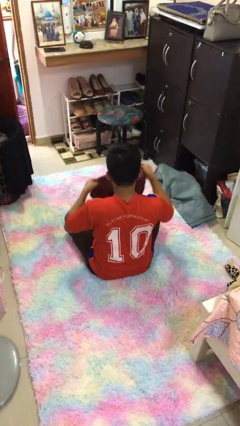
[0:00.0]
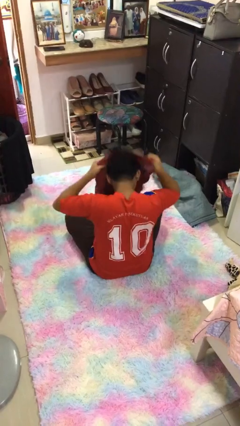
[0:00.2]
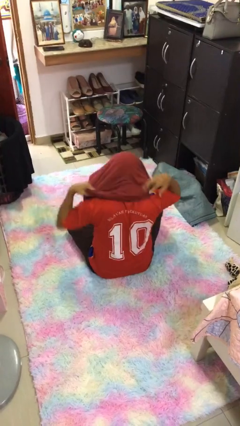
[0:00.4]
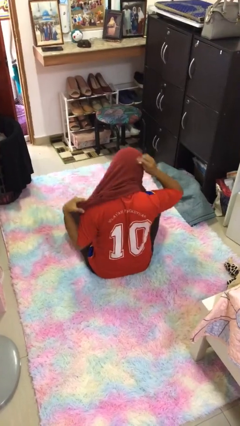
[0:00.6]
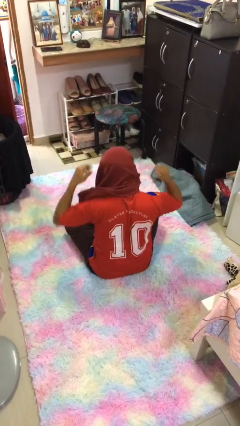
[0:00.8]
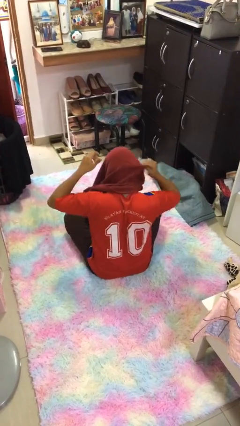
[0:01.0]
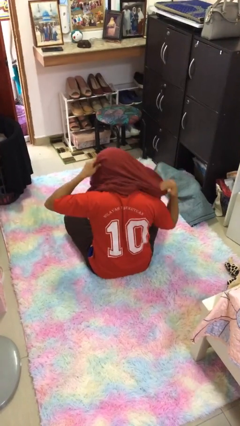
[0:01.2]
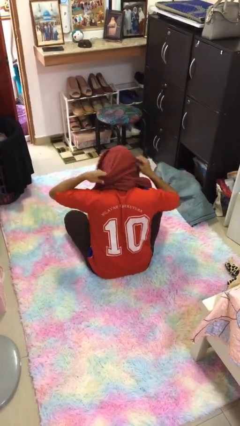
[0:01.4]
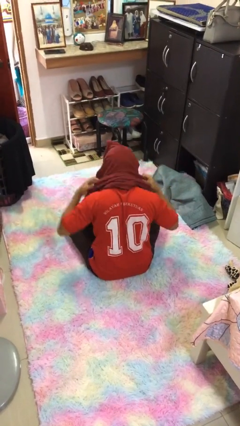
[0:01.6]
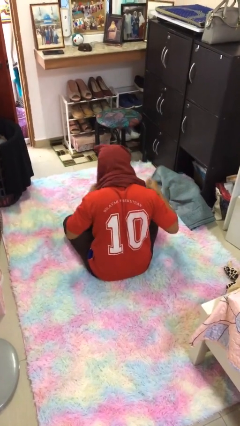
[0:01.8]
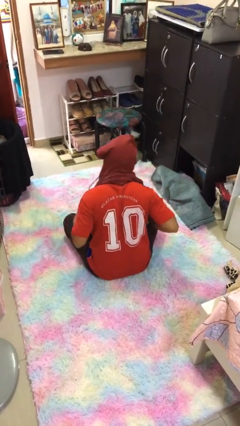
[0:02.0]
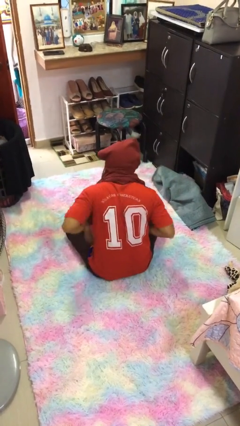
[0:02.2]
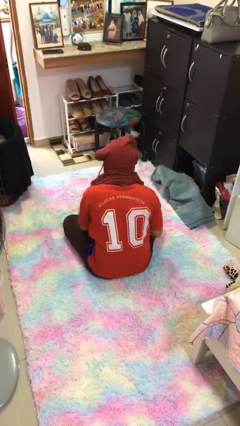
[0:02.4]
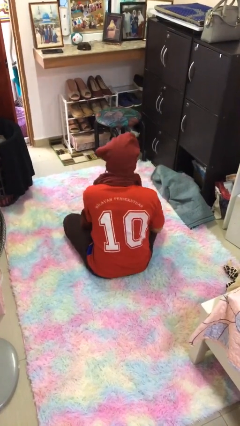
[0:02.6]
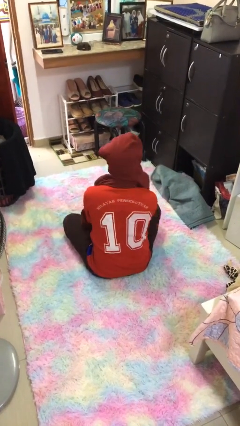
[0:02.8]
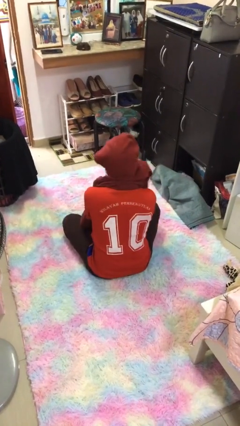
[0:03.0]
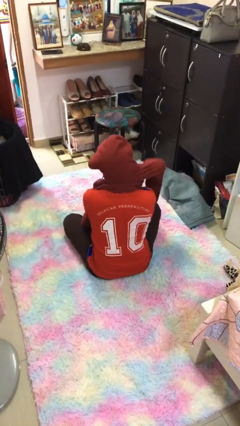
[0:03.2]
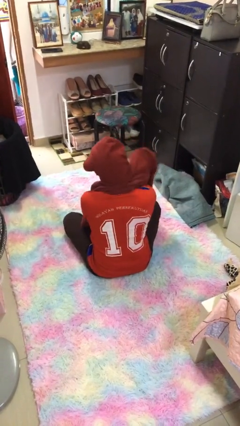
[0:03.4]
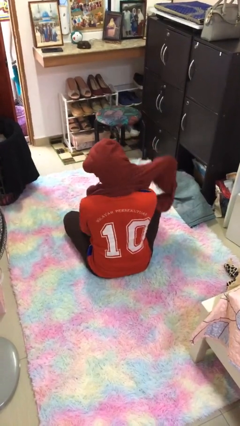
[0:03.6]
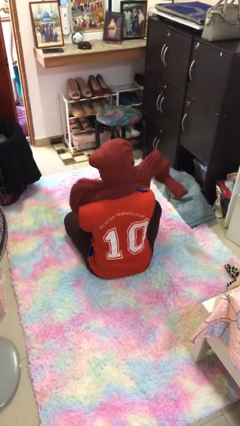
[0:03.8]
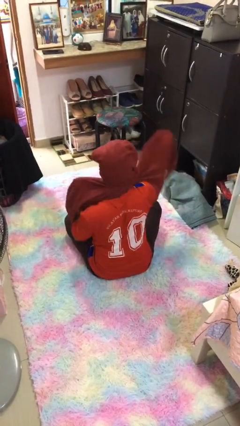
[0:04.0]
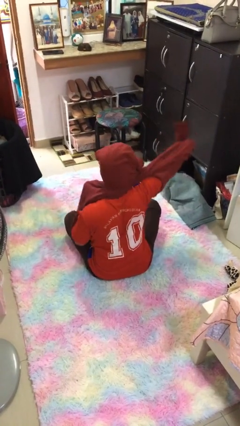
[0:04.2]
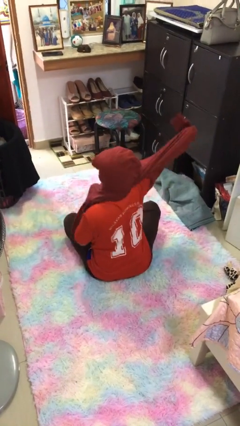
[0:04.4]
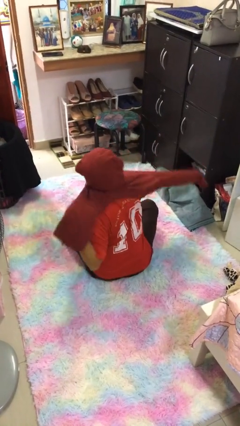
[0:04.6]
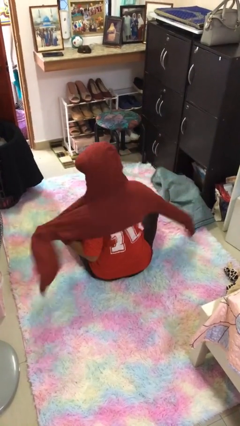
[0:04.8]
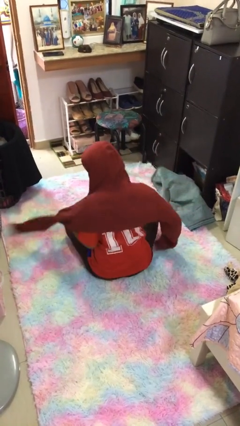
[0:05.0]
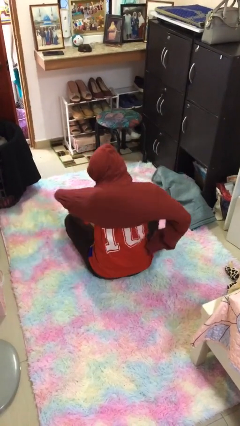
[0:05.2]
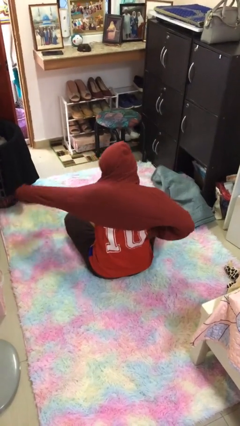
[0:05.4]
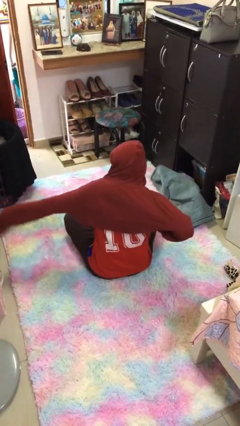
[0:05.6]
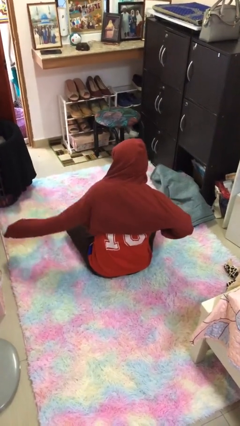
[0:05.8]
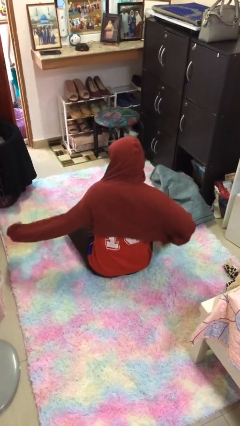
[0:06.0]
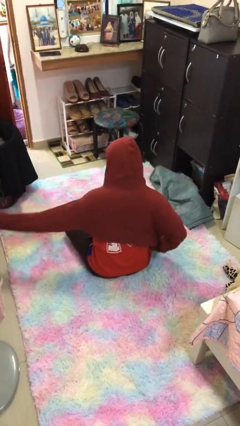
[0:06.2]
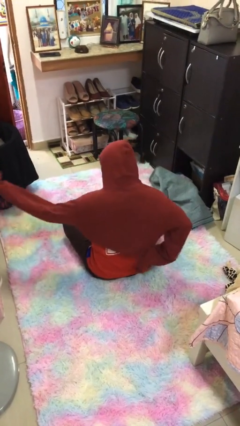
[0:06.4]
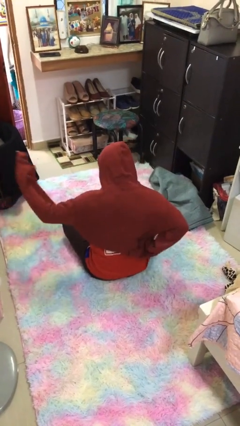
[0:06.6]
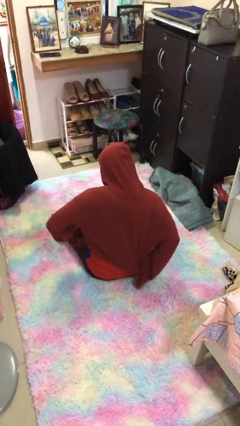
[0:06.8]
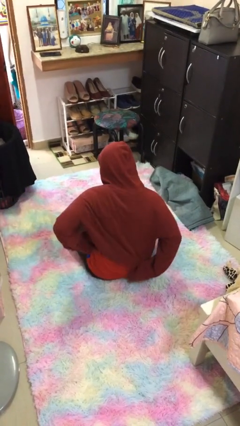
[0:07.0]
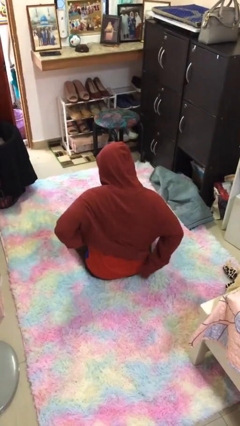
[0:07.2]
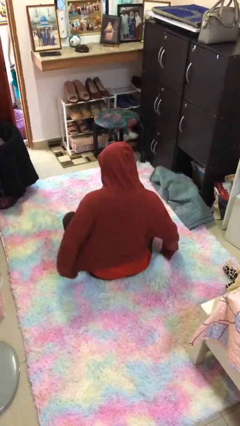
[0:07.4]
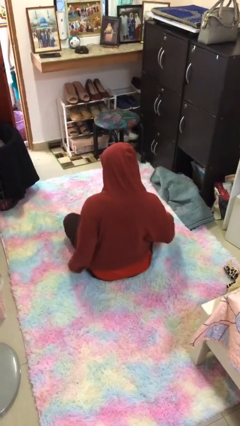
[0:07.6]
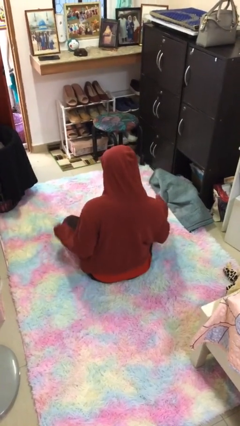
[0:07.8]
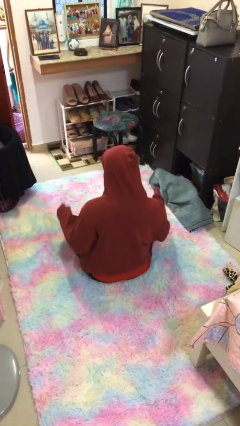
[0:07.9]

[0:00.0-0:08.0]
person puts on hoodie

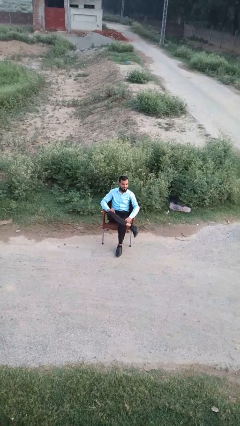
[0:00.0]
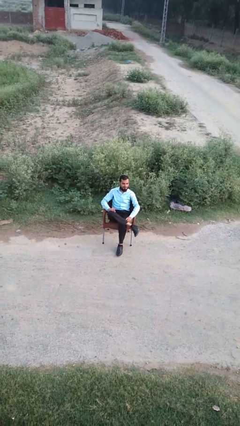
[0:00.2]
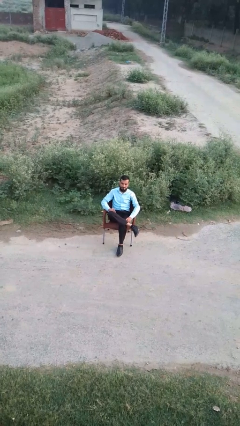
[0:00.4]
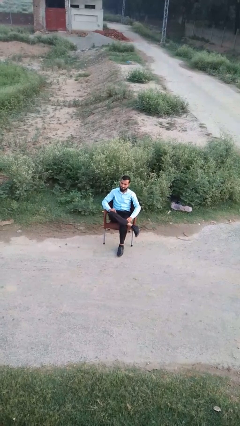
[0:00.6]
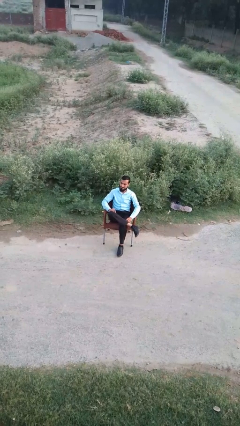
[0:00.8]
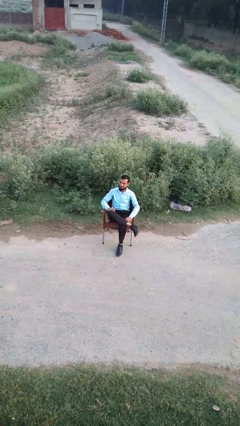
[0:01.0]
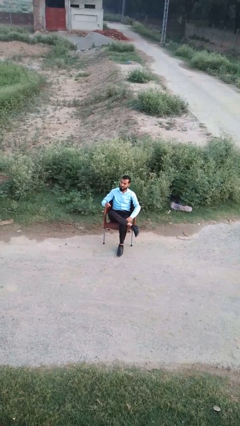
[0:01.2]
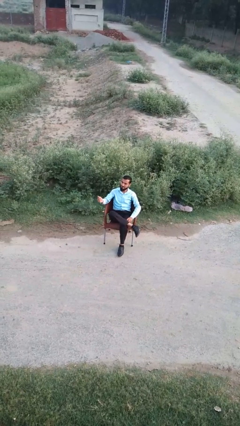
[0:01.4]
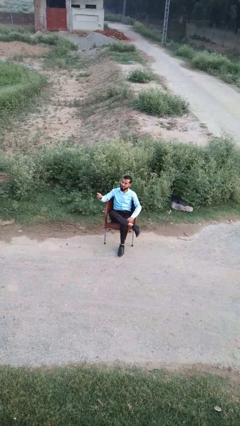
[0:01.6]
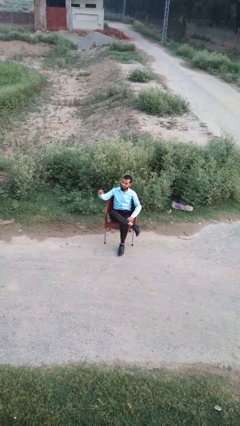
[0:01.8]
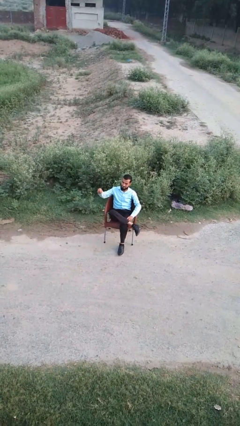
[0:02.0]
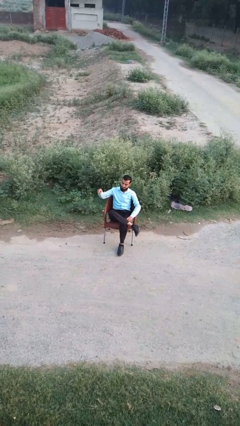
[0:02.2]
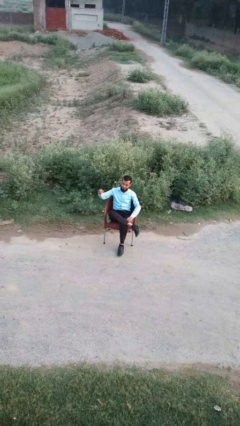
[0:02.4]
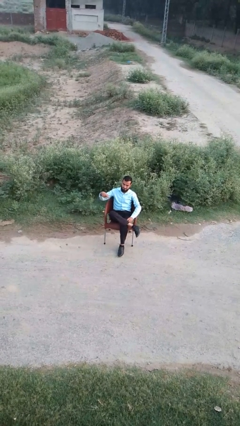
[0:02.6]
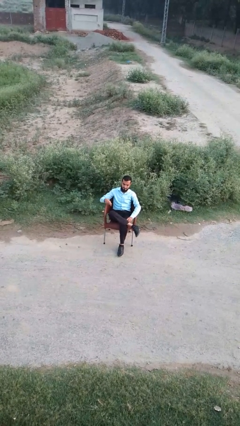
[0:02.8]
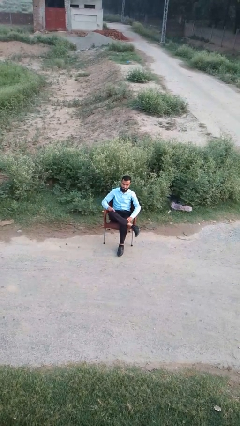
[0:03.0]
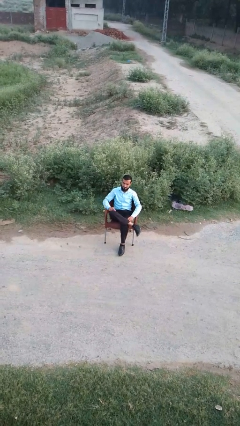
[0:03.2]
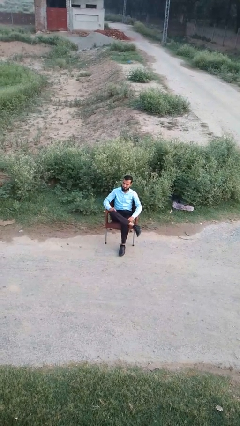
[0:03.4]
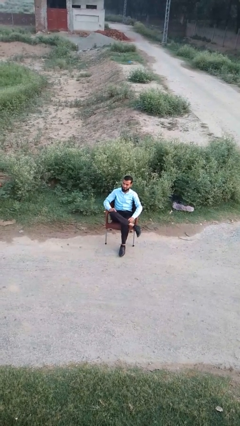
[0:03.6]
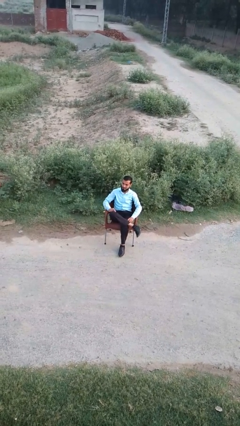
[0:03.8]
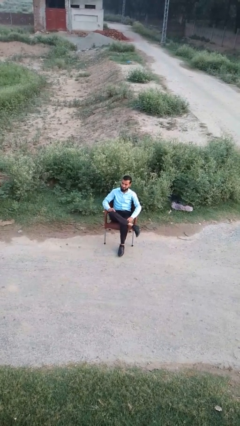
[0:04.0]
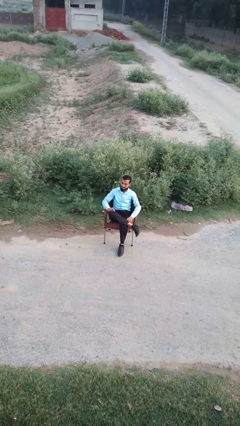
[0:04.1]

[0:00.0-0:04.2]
person gestures come here

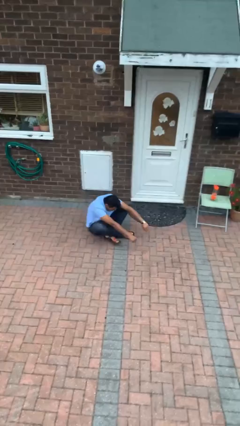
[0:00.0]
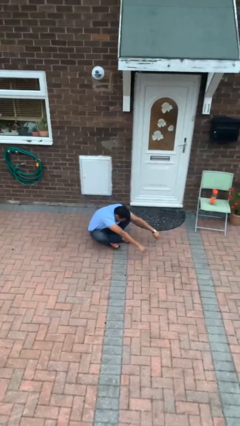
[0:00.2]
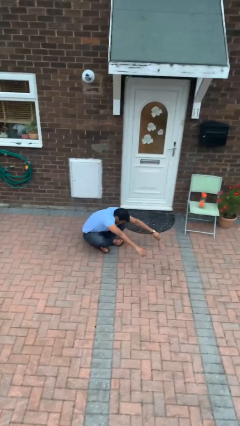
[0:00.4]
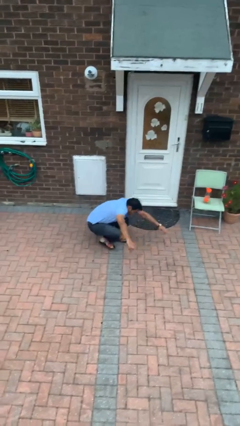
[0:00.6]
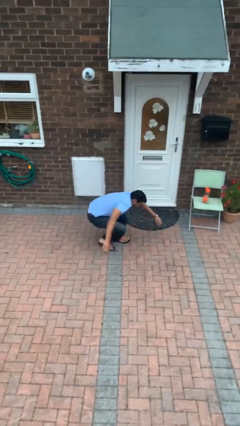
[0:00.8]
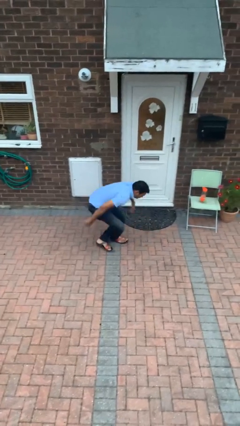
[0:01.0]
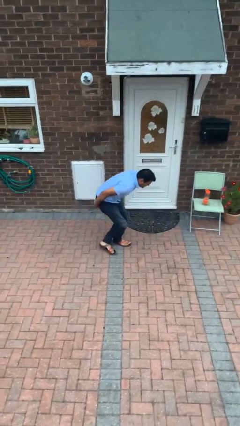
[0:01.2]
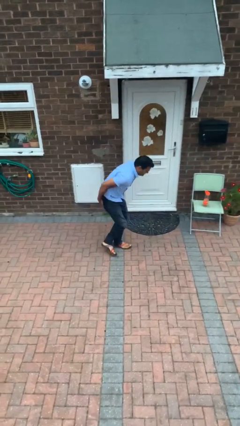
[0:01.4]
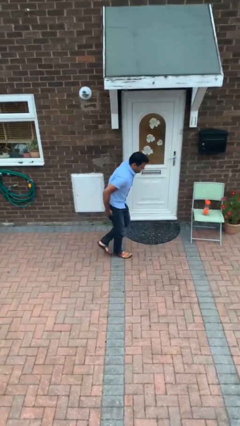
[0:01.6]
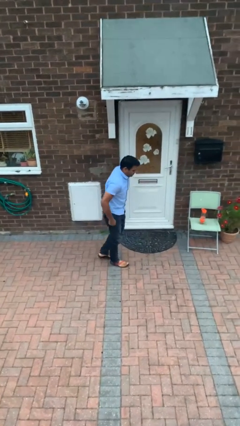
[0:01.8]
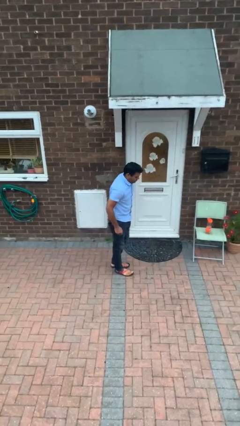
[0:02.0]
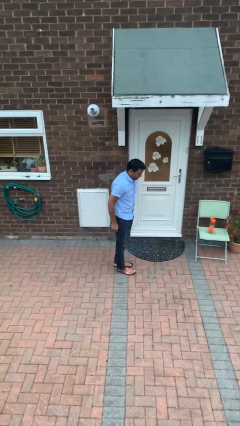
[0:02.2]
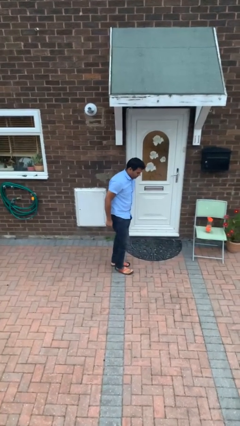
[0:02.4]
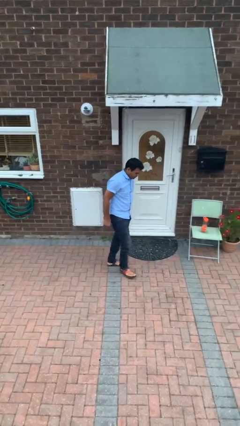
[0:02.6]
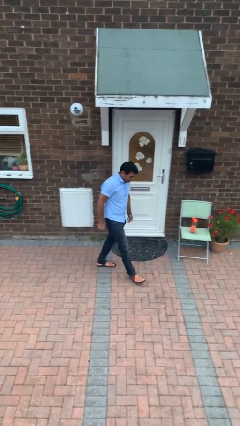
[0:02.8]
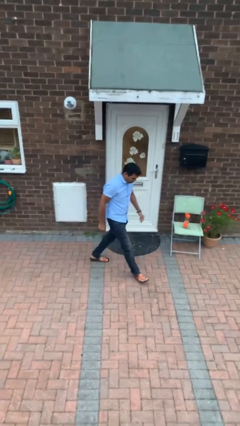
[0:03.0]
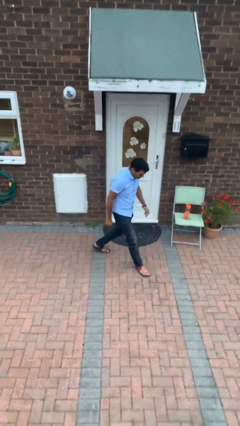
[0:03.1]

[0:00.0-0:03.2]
person stands up from floor

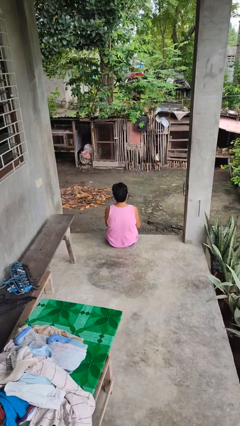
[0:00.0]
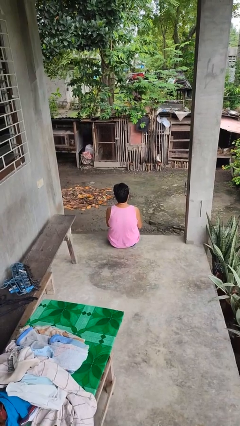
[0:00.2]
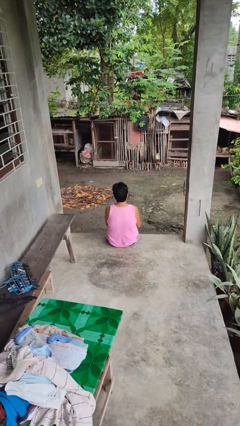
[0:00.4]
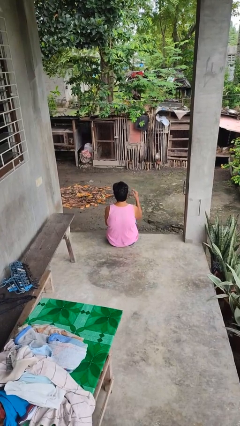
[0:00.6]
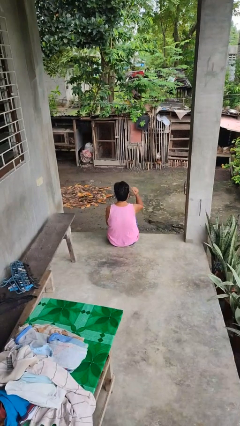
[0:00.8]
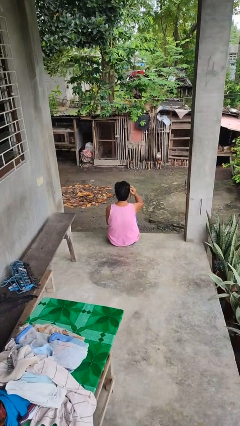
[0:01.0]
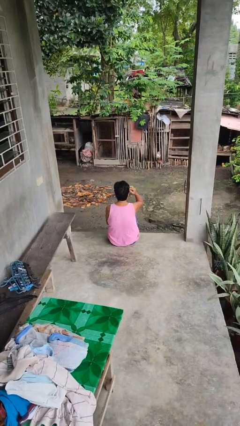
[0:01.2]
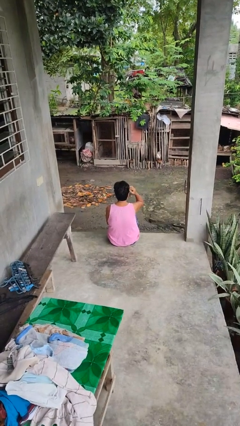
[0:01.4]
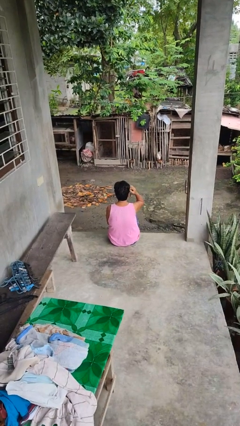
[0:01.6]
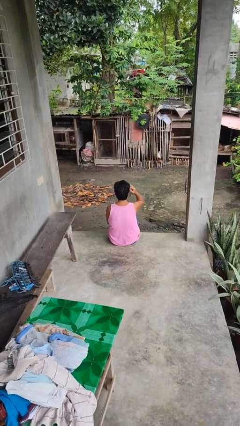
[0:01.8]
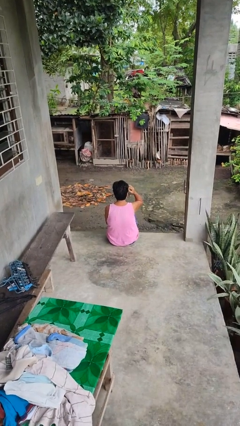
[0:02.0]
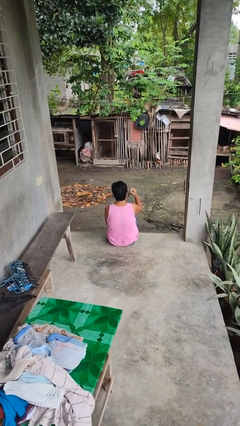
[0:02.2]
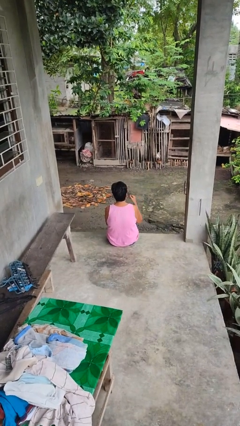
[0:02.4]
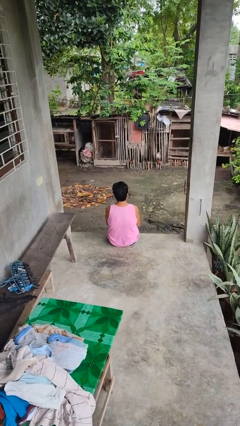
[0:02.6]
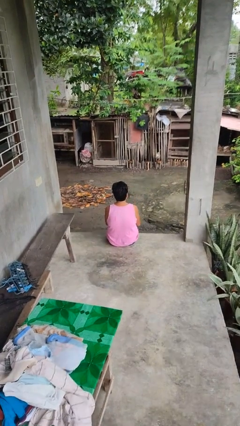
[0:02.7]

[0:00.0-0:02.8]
person scratches face
